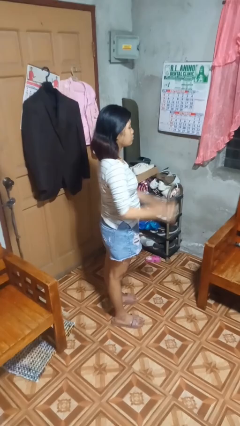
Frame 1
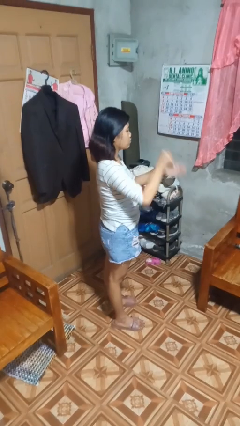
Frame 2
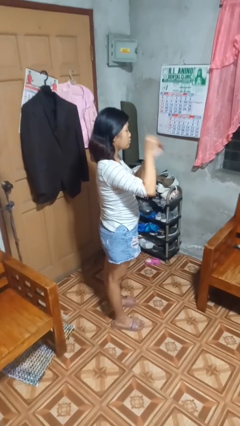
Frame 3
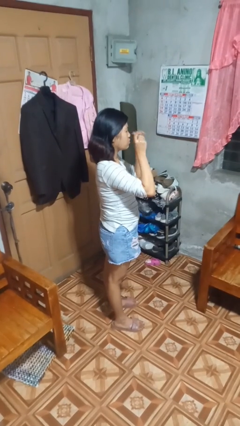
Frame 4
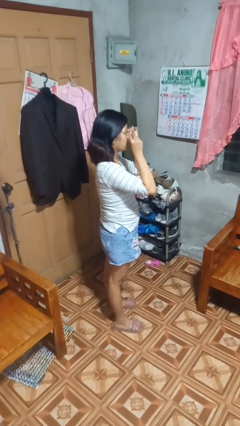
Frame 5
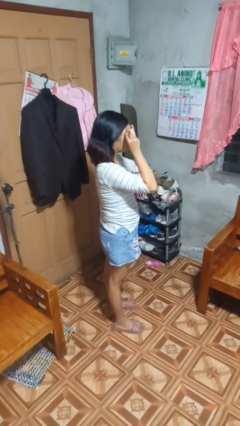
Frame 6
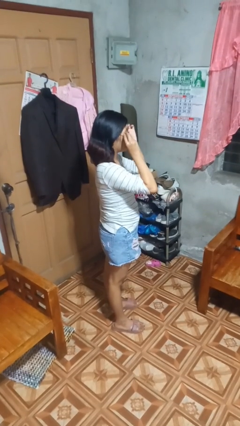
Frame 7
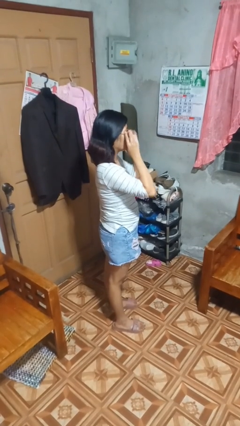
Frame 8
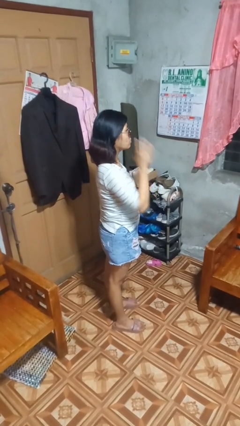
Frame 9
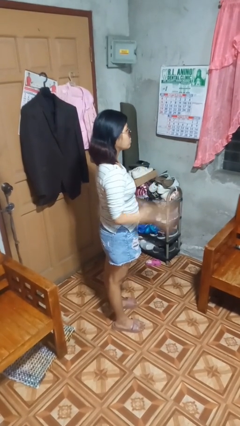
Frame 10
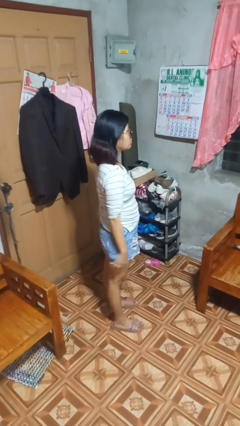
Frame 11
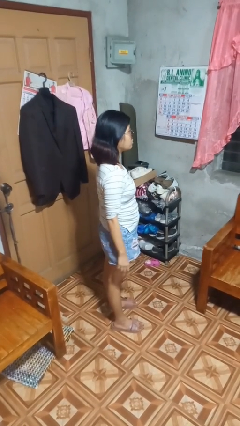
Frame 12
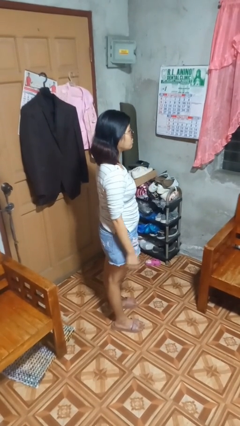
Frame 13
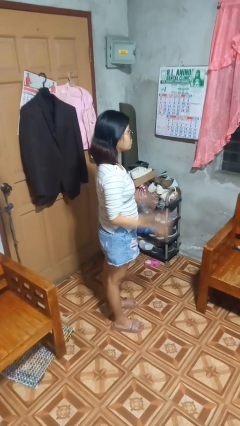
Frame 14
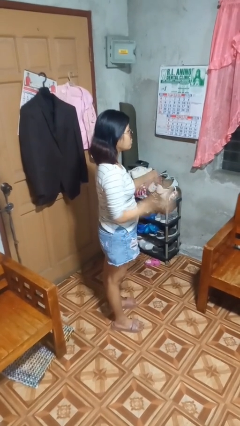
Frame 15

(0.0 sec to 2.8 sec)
person puts on sunglasses

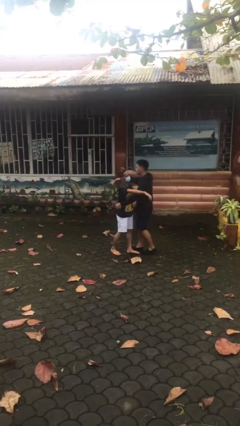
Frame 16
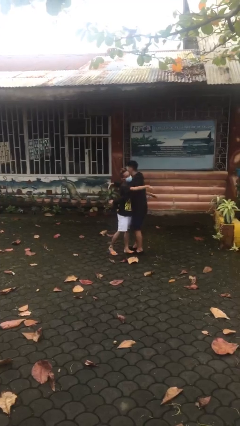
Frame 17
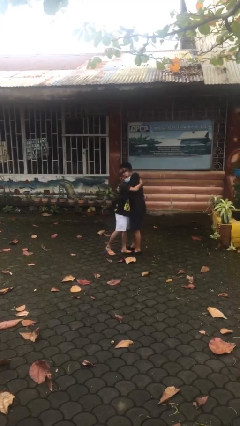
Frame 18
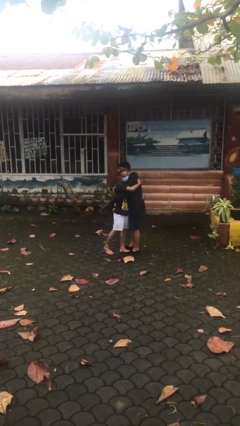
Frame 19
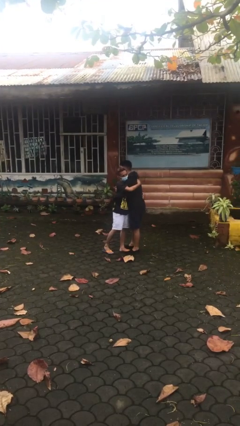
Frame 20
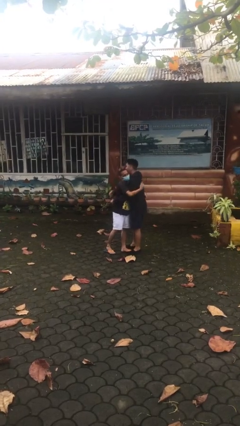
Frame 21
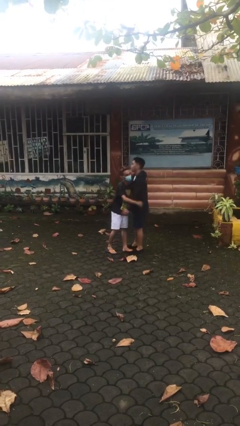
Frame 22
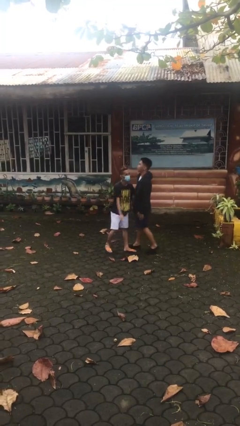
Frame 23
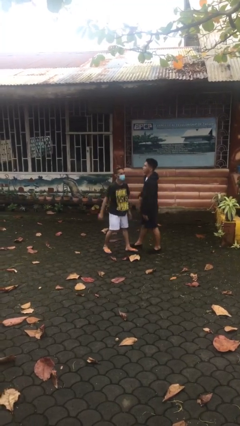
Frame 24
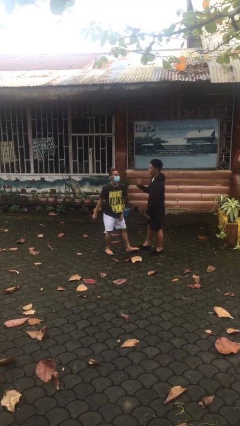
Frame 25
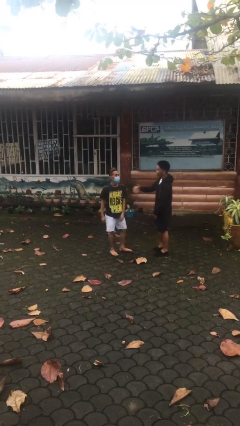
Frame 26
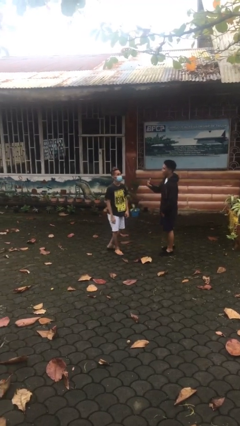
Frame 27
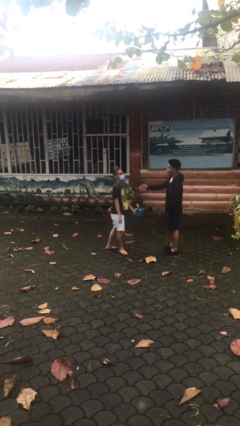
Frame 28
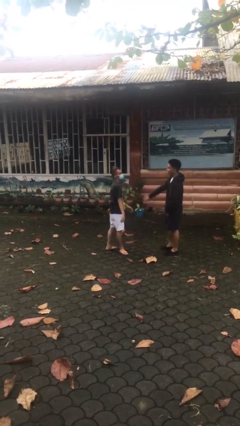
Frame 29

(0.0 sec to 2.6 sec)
person embraces person

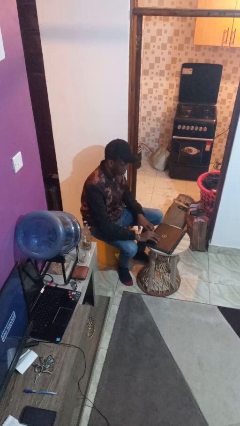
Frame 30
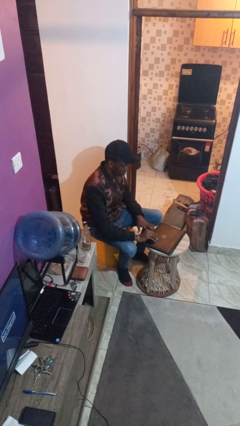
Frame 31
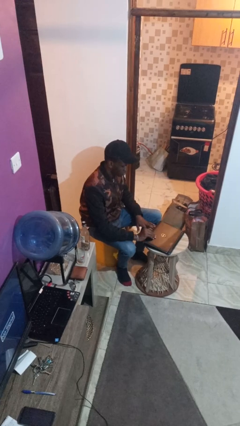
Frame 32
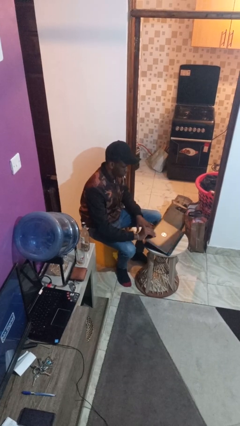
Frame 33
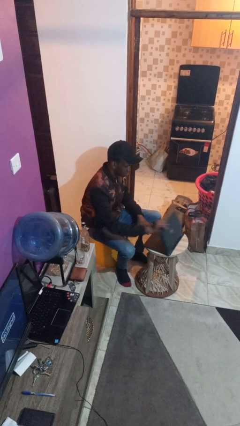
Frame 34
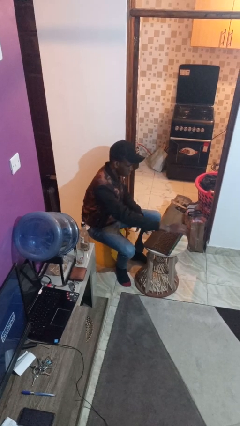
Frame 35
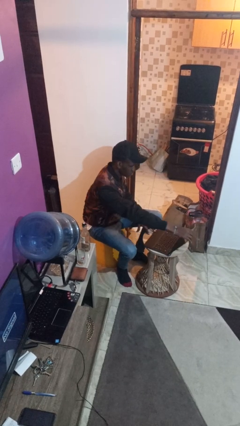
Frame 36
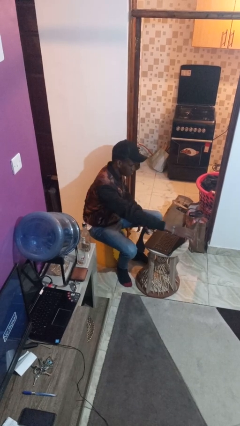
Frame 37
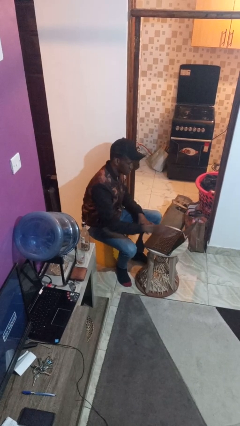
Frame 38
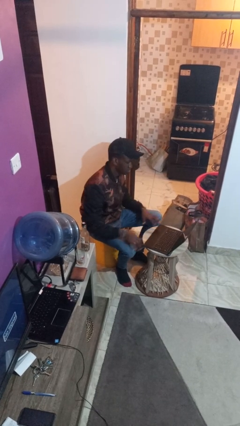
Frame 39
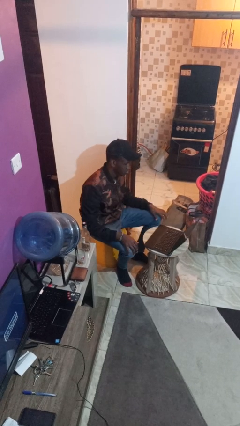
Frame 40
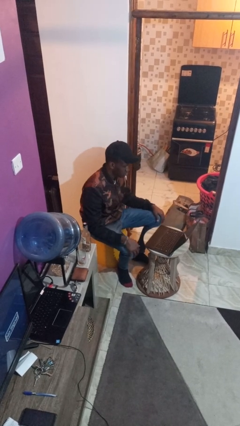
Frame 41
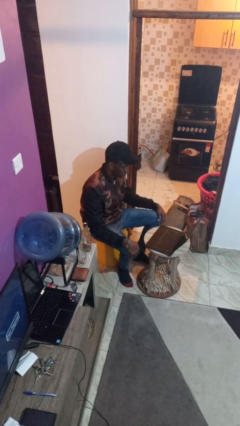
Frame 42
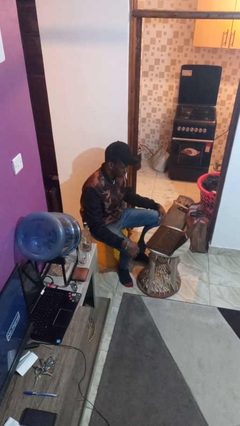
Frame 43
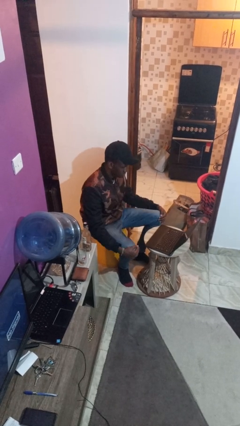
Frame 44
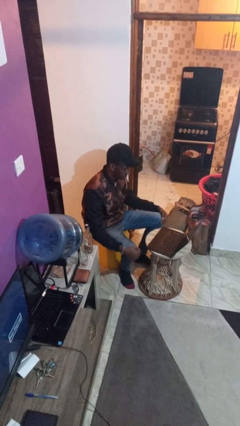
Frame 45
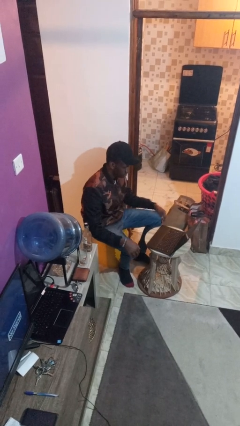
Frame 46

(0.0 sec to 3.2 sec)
person opens laptop

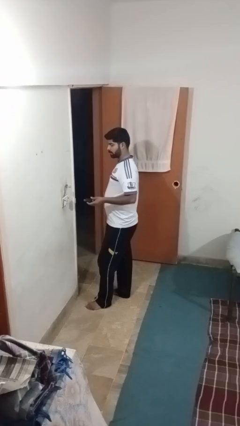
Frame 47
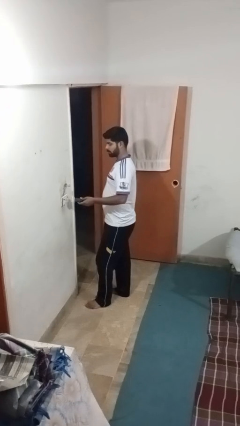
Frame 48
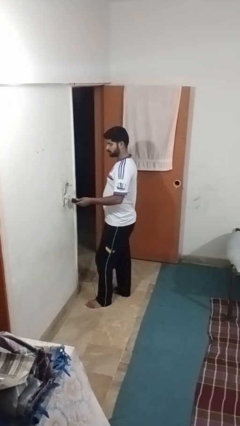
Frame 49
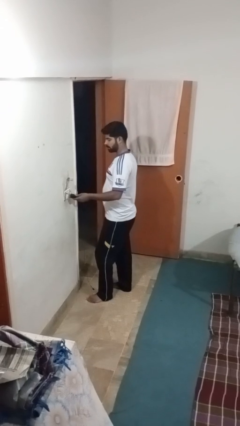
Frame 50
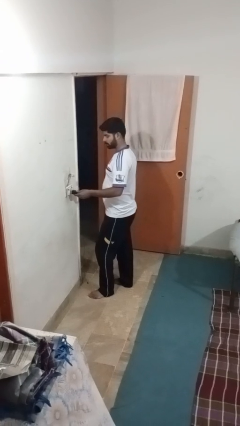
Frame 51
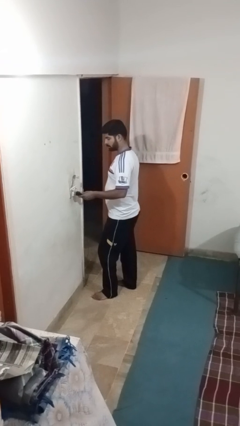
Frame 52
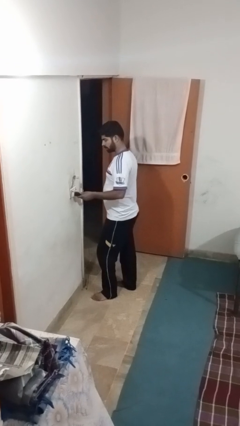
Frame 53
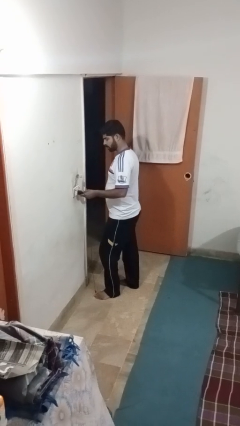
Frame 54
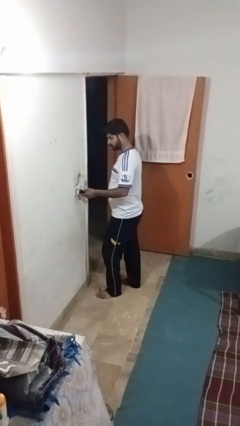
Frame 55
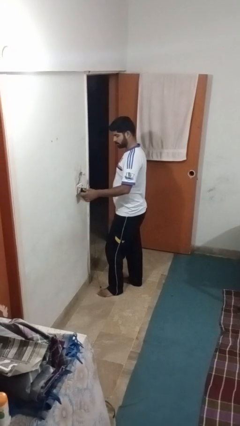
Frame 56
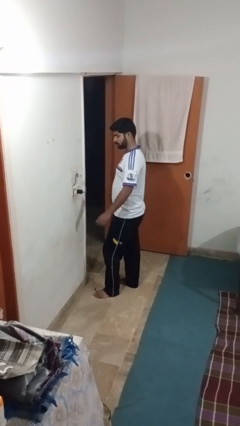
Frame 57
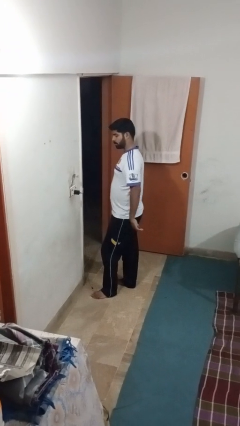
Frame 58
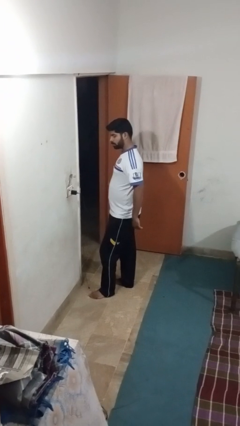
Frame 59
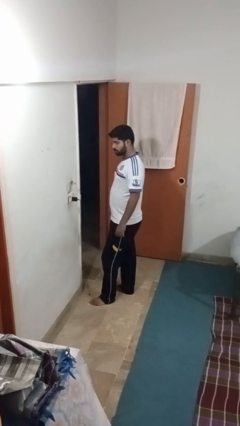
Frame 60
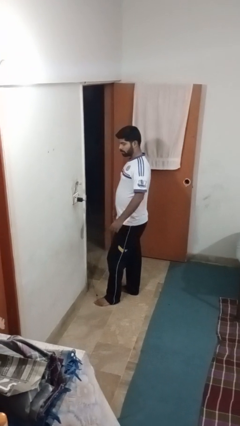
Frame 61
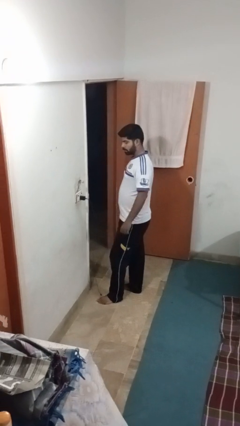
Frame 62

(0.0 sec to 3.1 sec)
person plugs into electrical socket

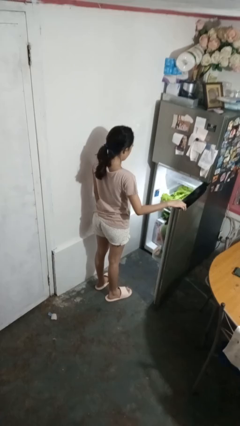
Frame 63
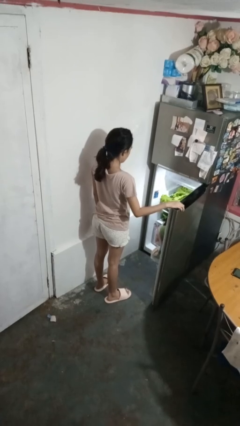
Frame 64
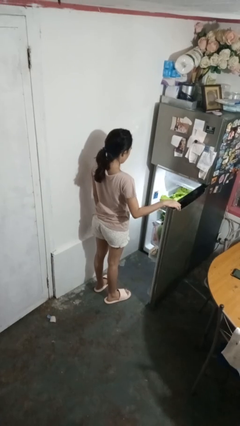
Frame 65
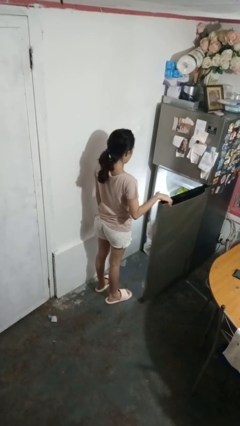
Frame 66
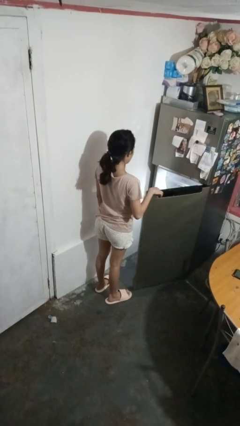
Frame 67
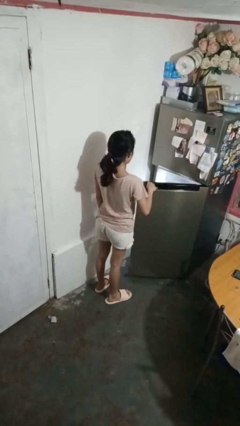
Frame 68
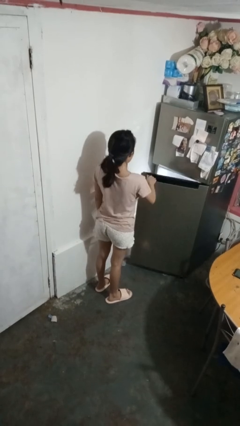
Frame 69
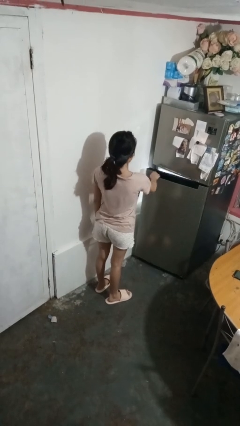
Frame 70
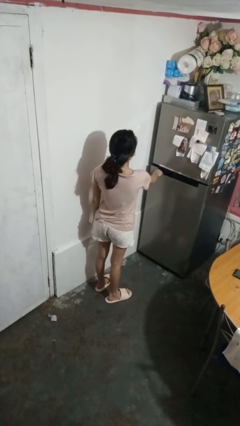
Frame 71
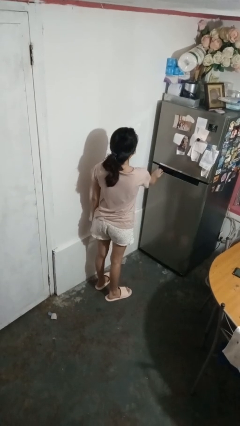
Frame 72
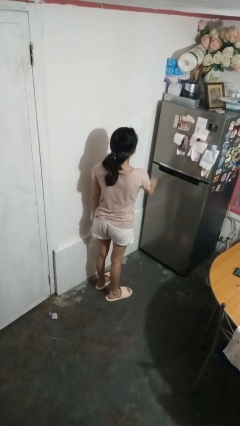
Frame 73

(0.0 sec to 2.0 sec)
person closes refrigerator

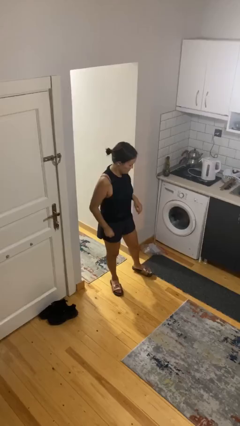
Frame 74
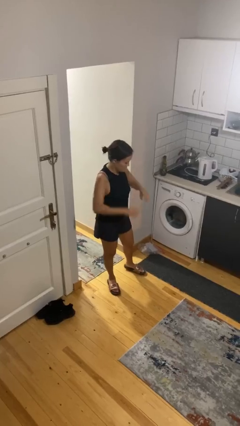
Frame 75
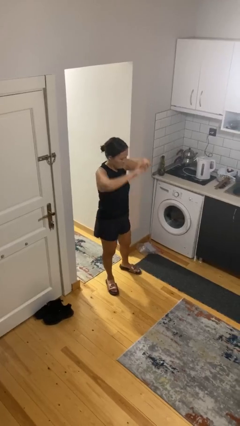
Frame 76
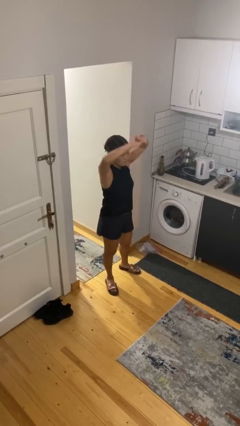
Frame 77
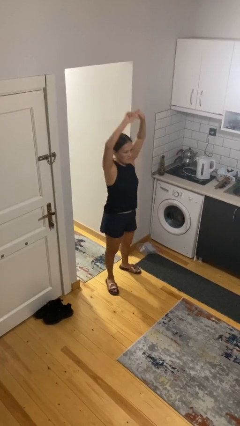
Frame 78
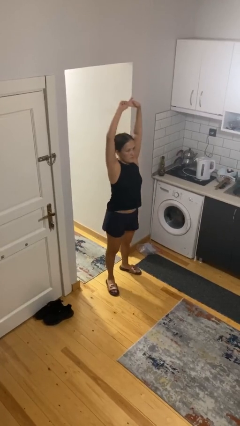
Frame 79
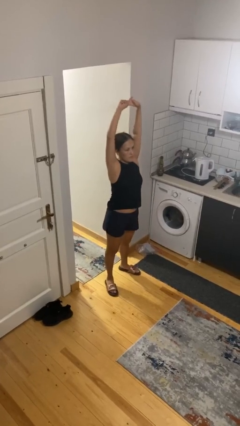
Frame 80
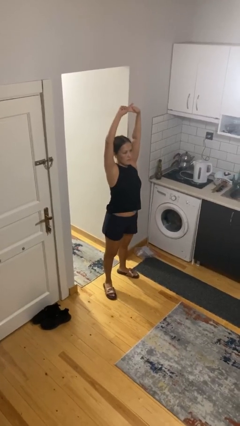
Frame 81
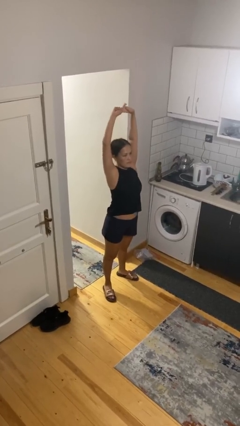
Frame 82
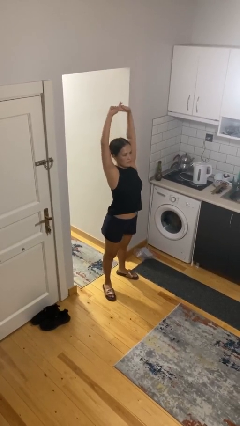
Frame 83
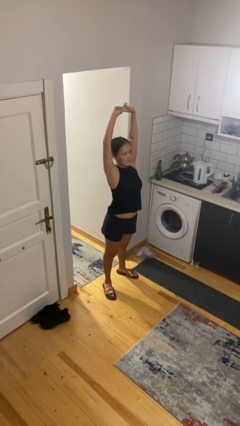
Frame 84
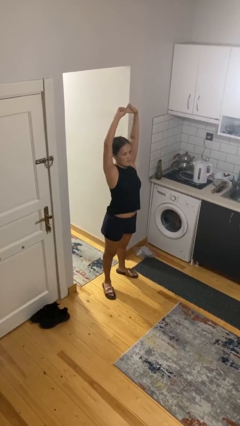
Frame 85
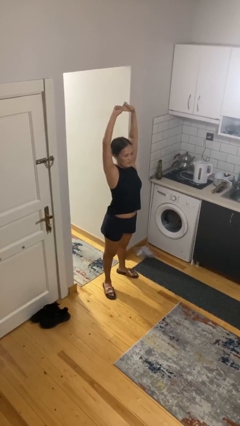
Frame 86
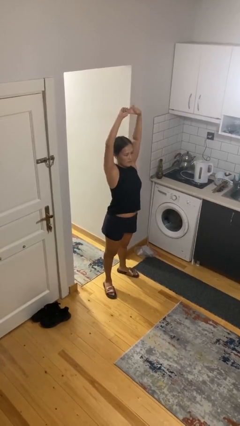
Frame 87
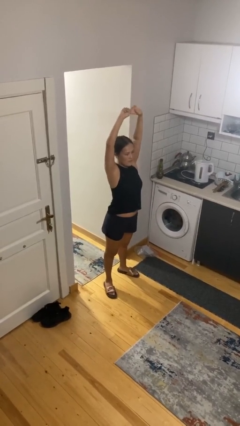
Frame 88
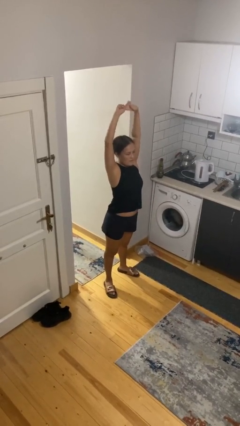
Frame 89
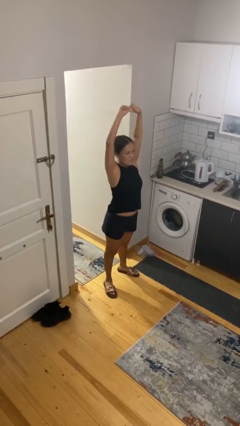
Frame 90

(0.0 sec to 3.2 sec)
person stretches arms over head
